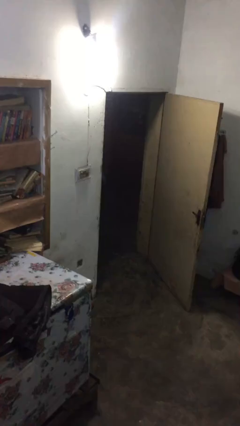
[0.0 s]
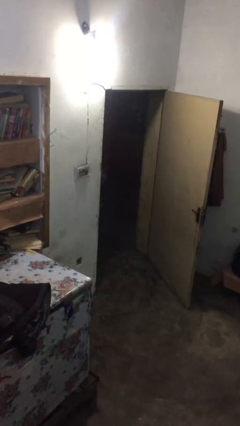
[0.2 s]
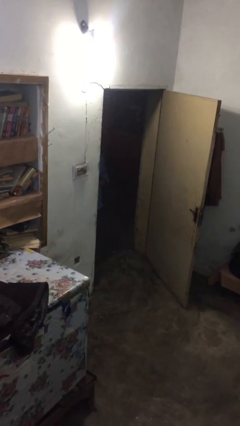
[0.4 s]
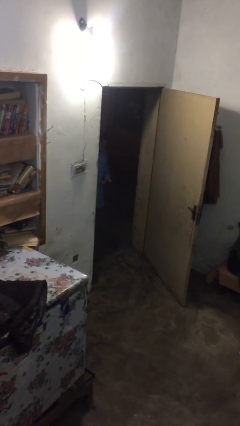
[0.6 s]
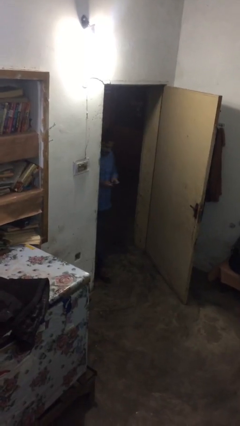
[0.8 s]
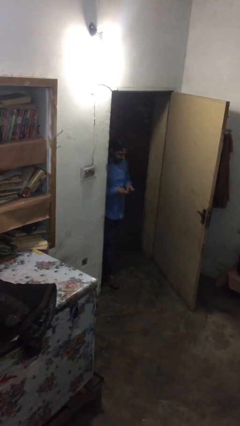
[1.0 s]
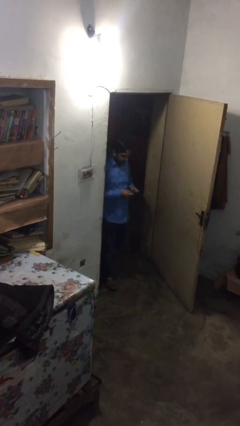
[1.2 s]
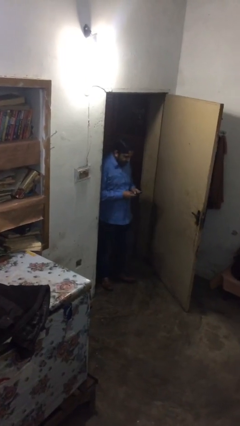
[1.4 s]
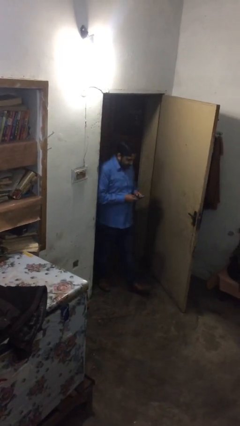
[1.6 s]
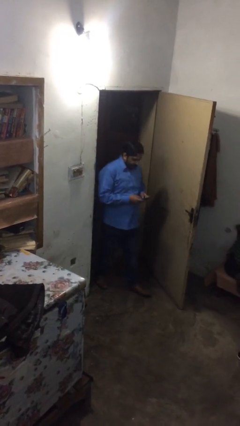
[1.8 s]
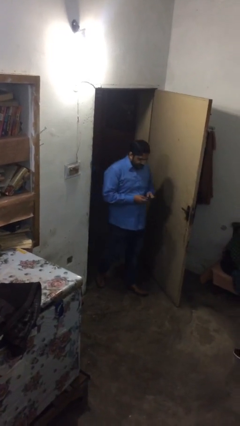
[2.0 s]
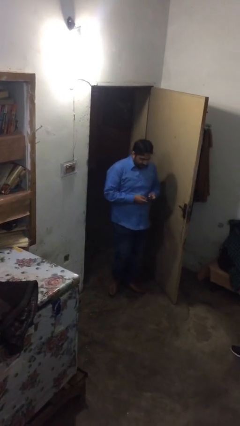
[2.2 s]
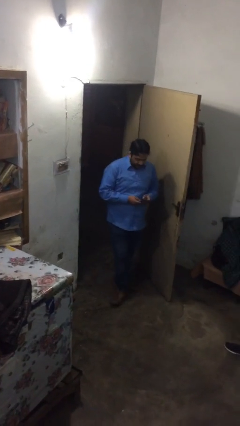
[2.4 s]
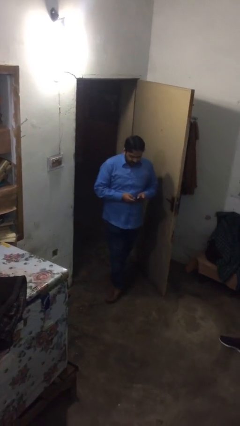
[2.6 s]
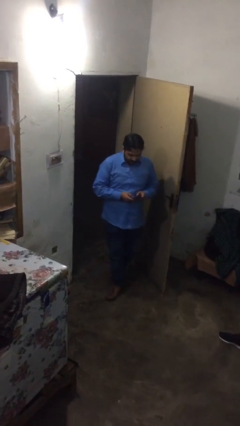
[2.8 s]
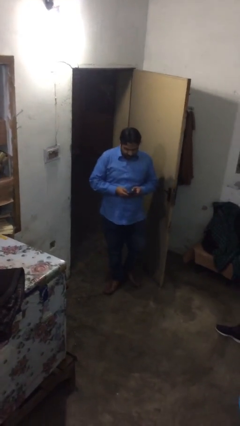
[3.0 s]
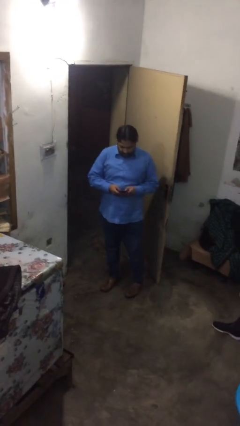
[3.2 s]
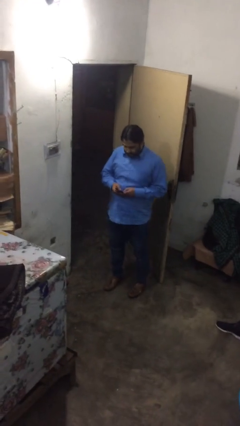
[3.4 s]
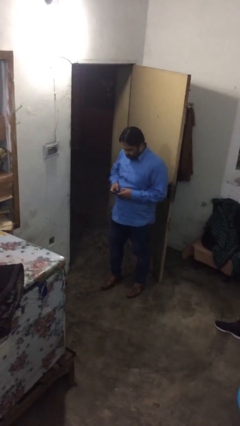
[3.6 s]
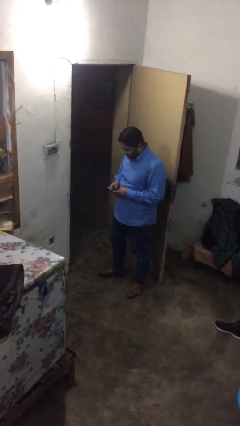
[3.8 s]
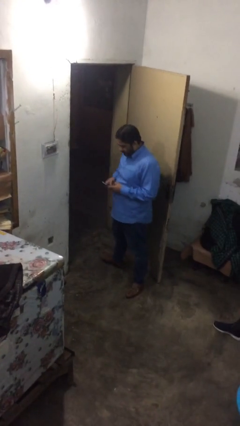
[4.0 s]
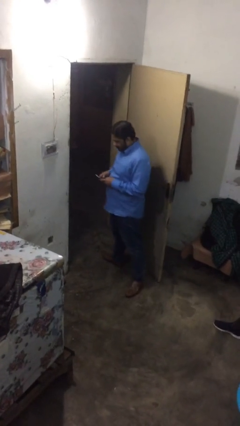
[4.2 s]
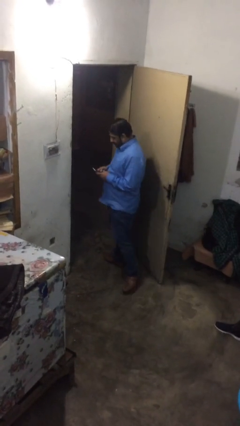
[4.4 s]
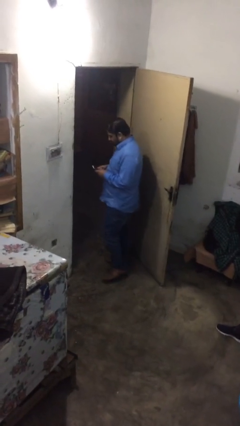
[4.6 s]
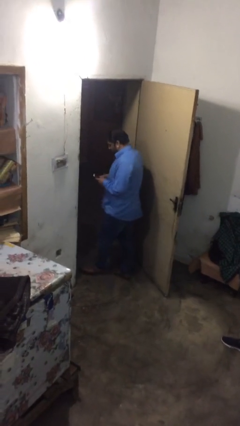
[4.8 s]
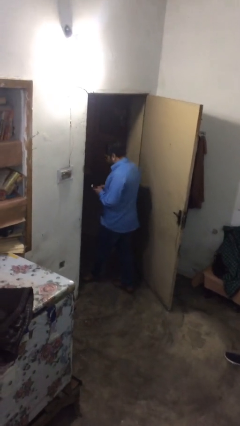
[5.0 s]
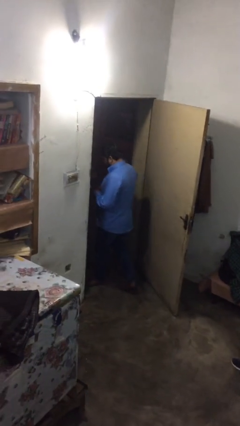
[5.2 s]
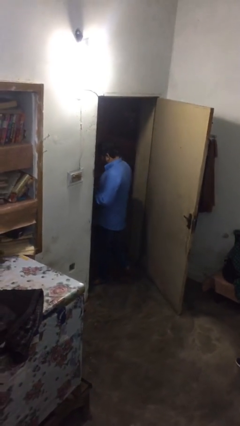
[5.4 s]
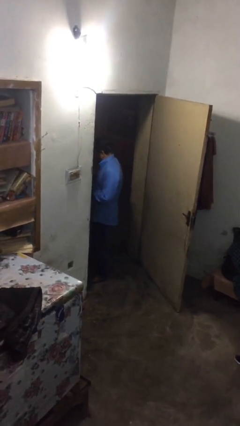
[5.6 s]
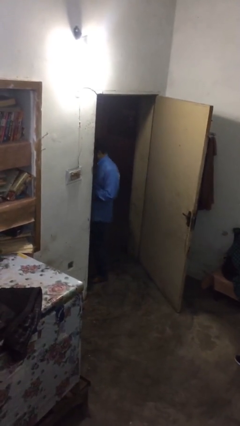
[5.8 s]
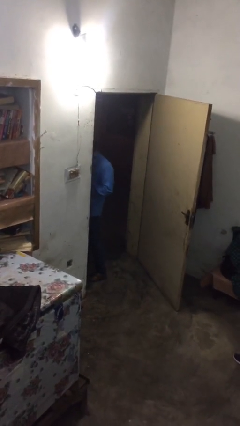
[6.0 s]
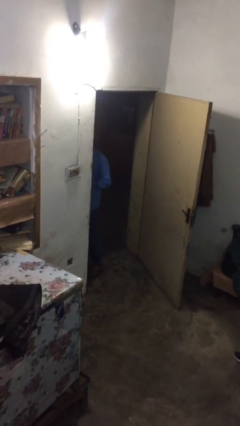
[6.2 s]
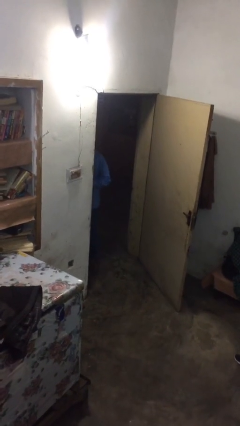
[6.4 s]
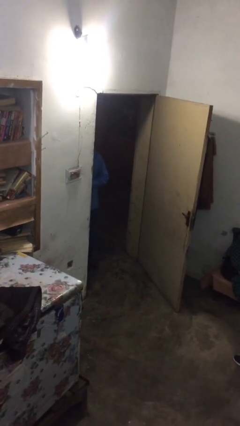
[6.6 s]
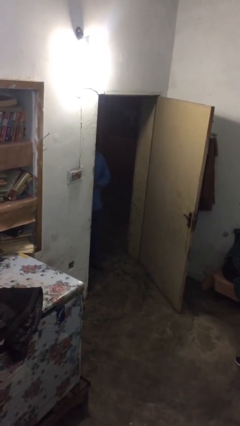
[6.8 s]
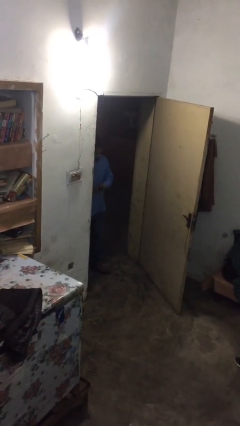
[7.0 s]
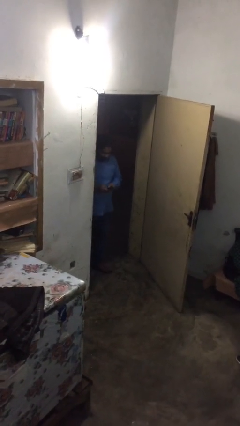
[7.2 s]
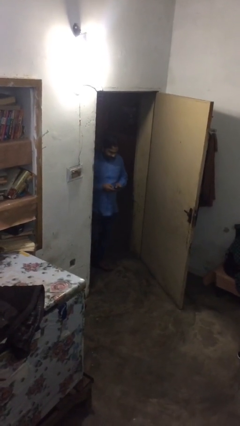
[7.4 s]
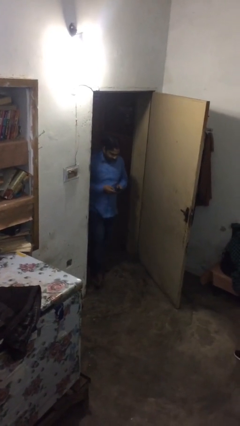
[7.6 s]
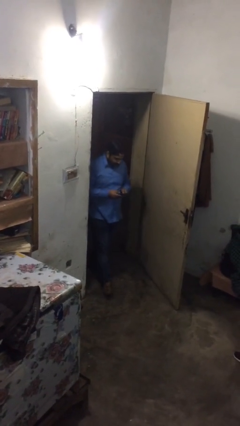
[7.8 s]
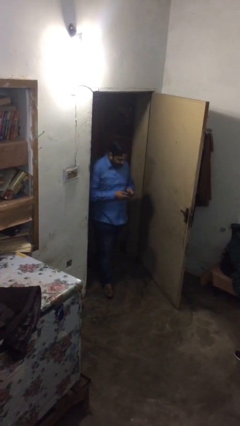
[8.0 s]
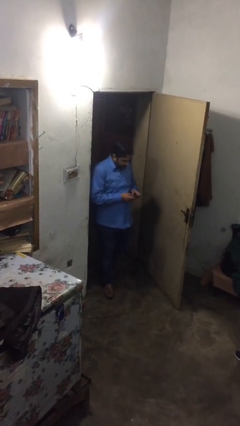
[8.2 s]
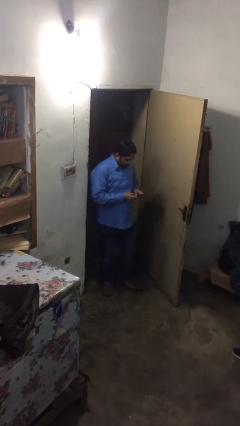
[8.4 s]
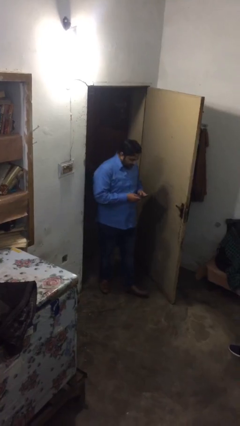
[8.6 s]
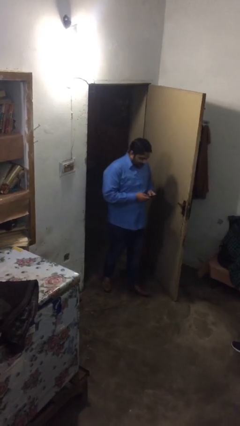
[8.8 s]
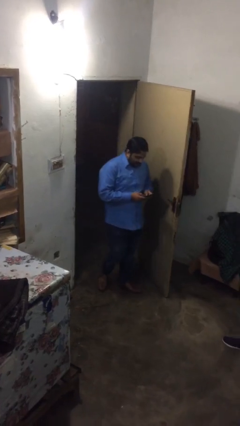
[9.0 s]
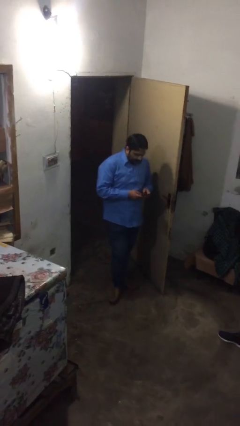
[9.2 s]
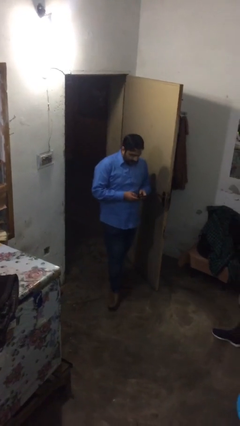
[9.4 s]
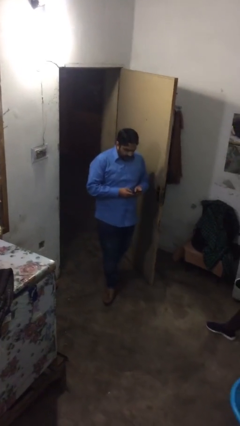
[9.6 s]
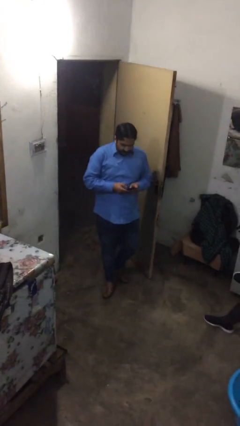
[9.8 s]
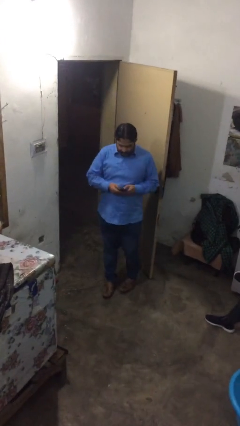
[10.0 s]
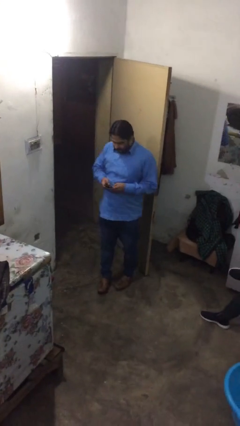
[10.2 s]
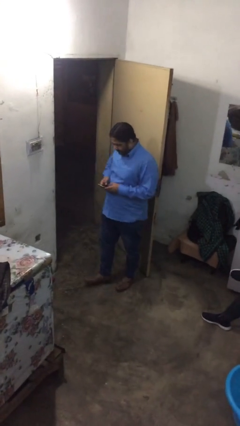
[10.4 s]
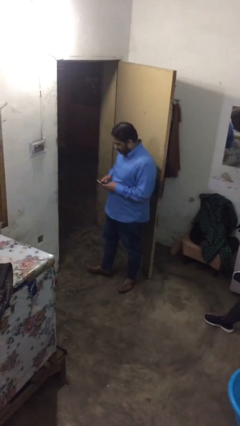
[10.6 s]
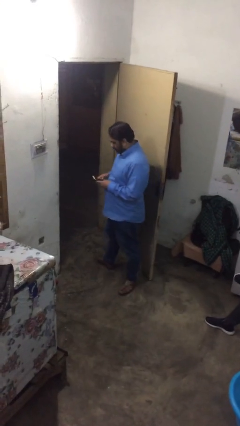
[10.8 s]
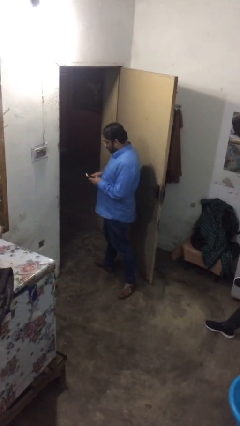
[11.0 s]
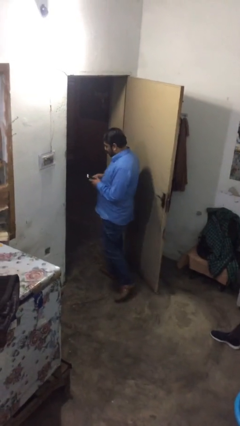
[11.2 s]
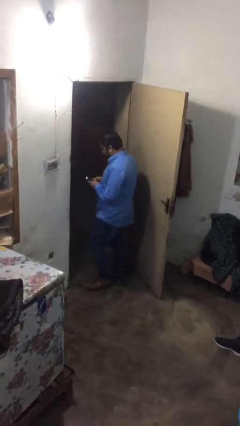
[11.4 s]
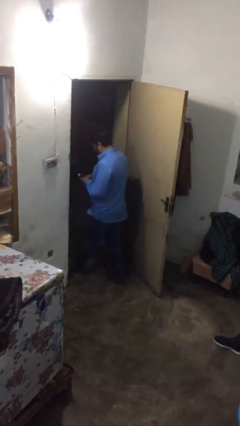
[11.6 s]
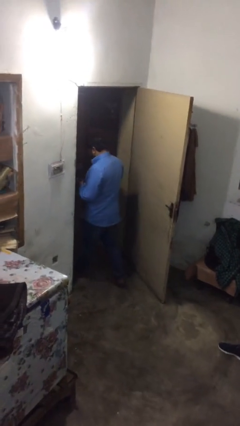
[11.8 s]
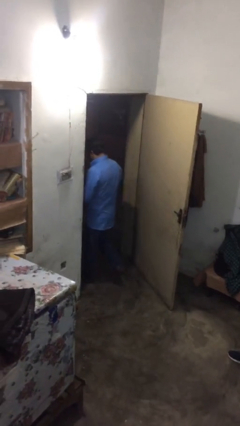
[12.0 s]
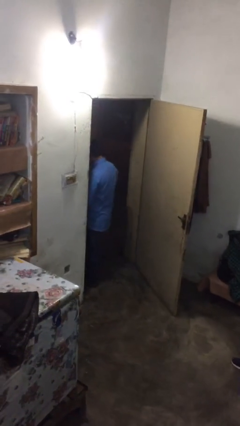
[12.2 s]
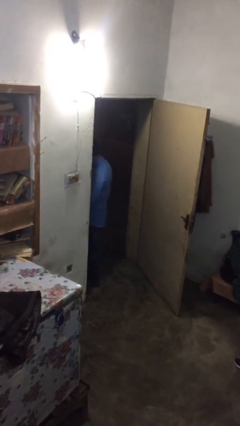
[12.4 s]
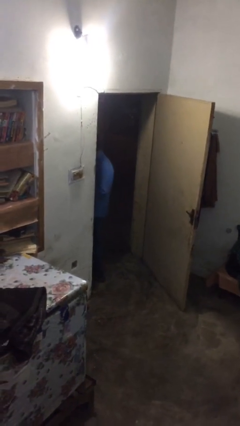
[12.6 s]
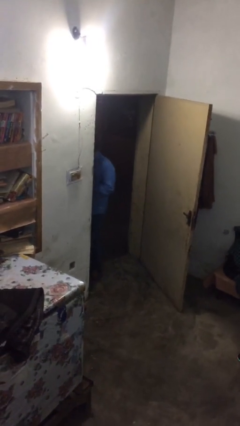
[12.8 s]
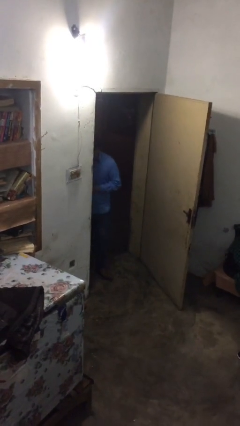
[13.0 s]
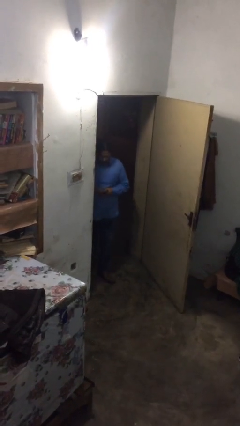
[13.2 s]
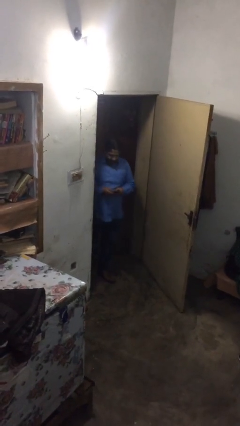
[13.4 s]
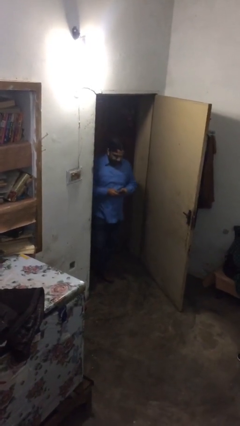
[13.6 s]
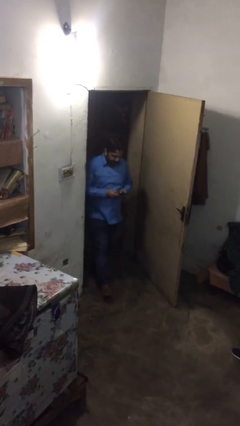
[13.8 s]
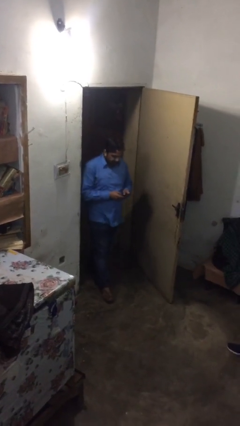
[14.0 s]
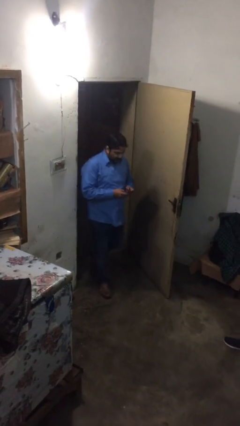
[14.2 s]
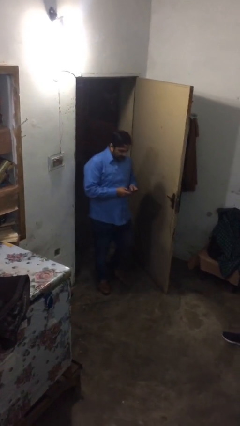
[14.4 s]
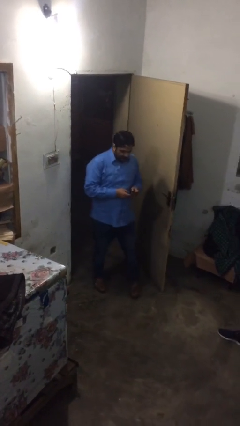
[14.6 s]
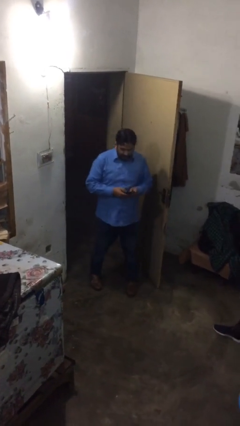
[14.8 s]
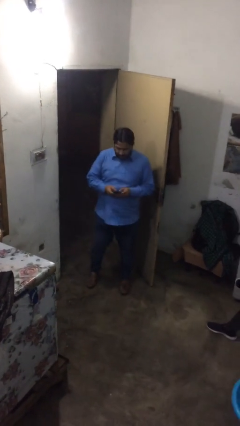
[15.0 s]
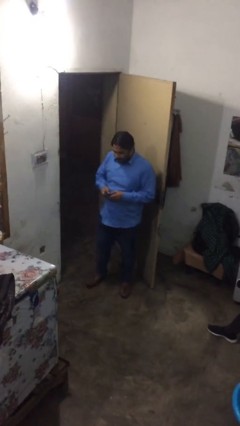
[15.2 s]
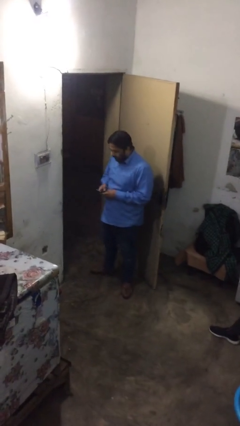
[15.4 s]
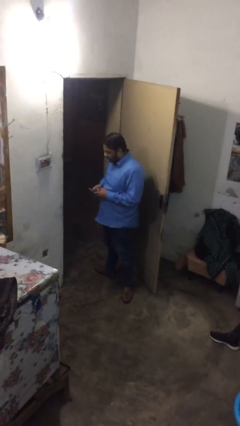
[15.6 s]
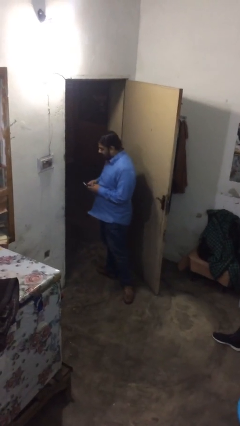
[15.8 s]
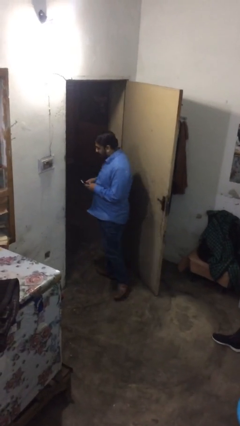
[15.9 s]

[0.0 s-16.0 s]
person texts on phone

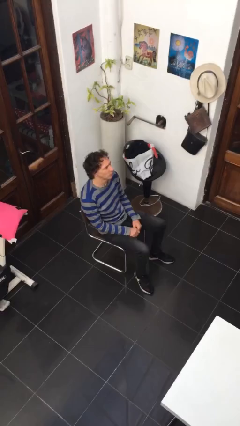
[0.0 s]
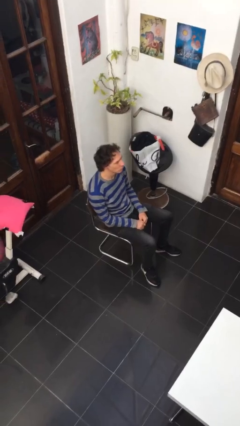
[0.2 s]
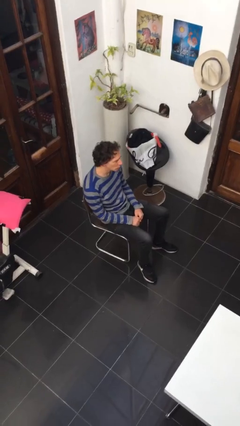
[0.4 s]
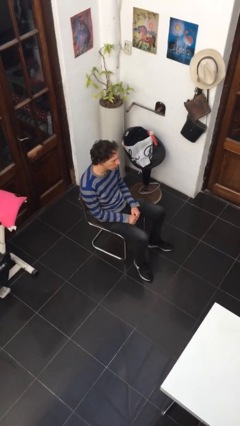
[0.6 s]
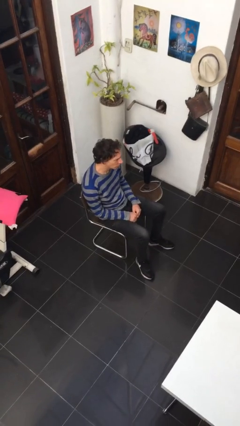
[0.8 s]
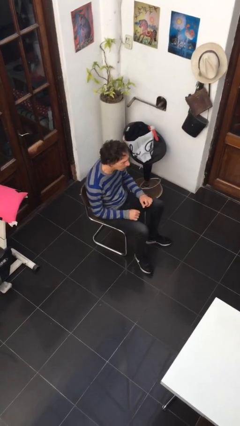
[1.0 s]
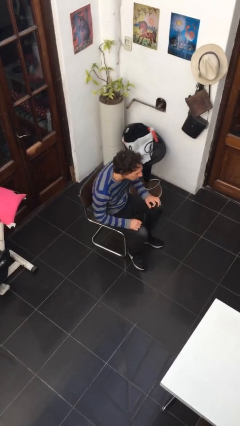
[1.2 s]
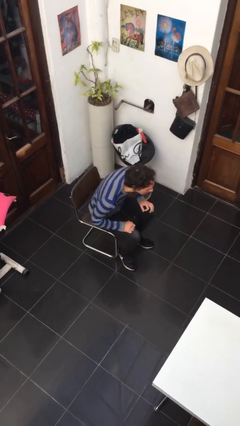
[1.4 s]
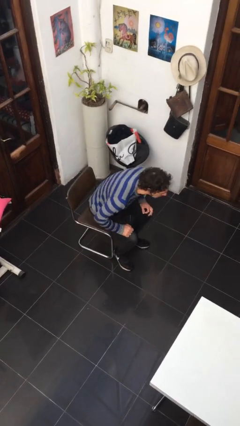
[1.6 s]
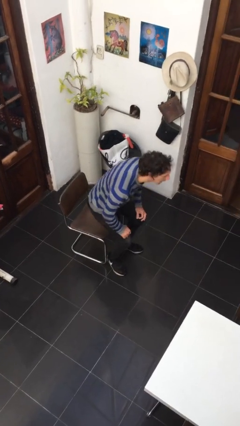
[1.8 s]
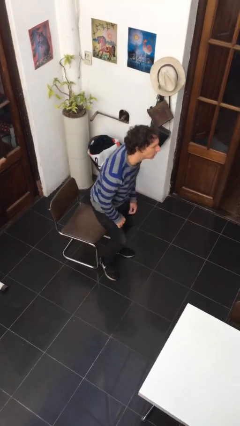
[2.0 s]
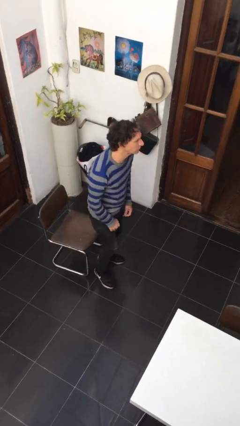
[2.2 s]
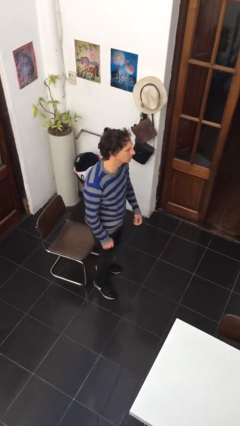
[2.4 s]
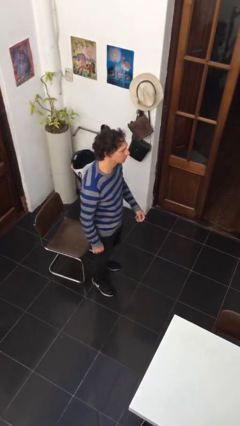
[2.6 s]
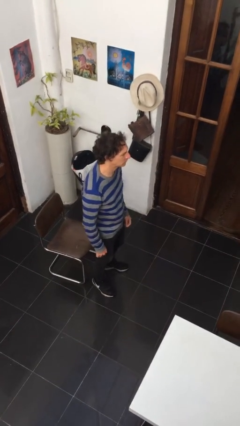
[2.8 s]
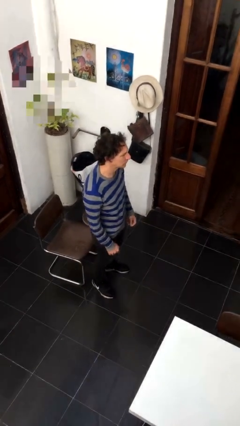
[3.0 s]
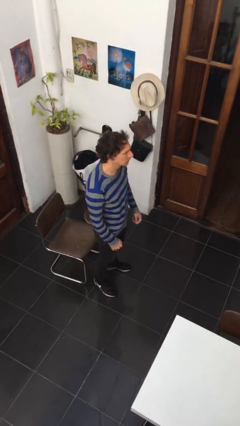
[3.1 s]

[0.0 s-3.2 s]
person stands up
